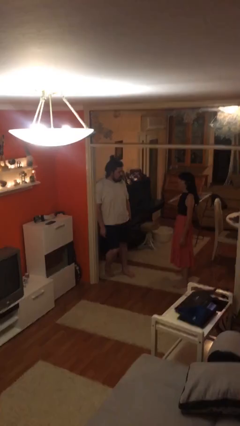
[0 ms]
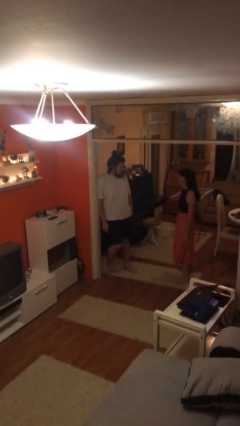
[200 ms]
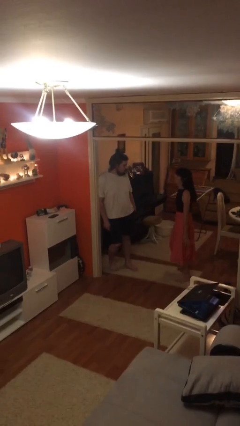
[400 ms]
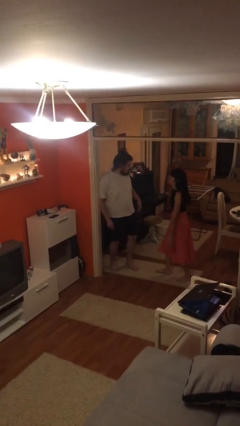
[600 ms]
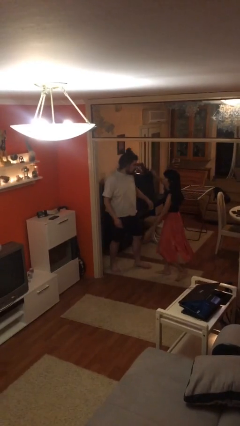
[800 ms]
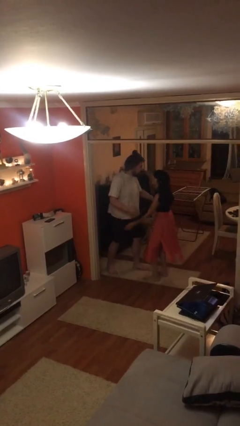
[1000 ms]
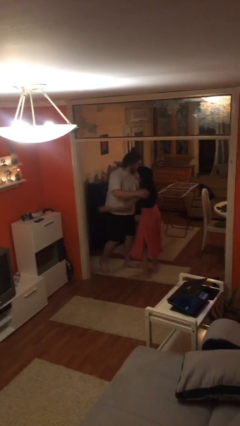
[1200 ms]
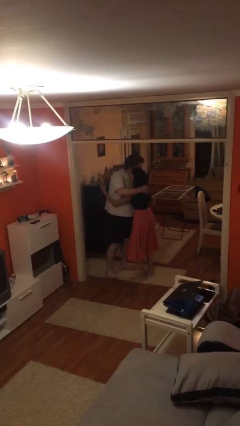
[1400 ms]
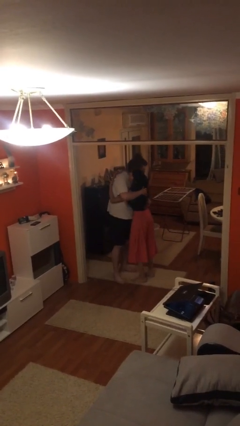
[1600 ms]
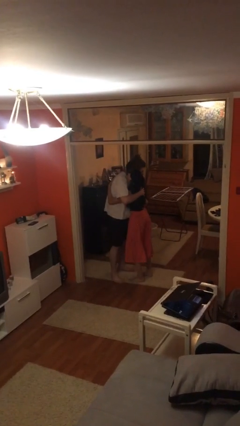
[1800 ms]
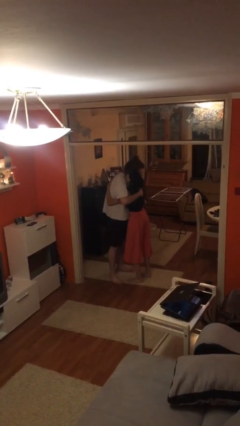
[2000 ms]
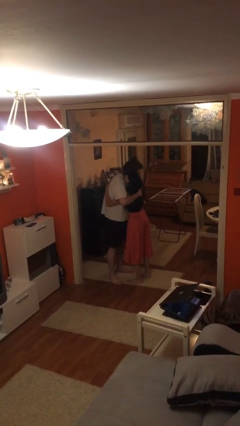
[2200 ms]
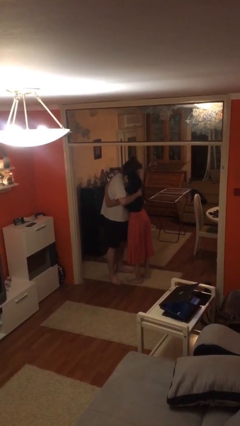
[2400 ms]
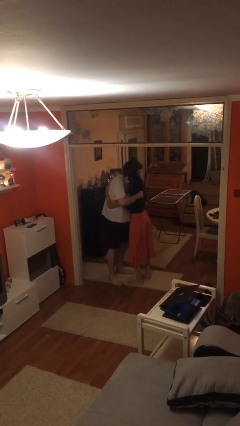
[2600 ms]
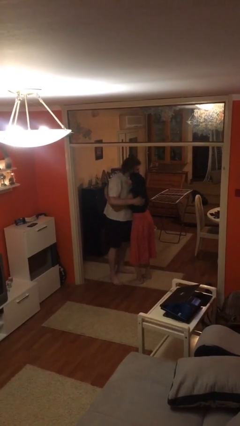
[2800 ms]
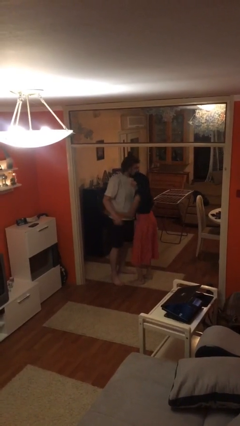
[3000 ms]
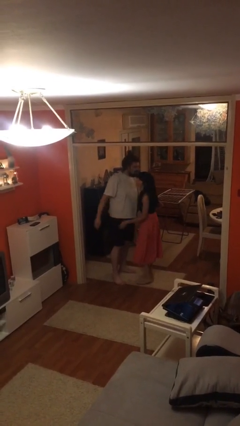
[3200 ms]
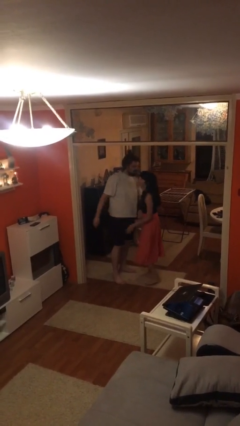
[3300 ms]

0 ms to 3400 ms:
person embraces person

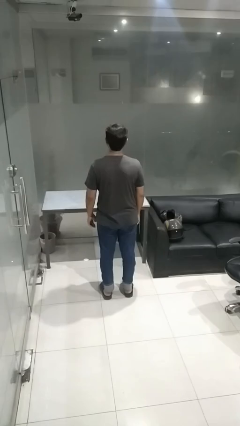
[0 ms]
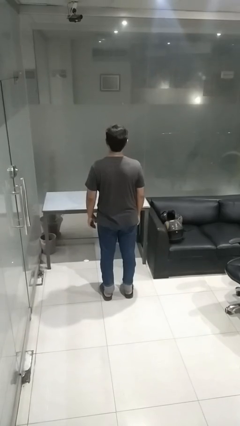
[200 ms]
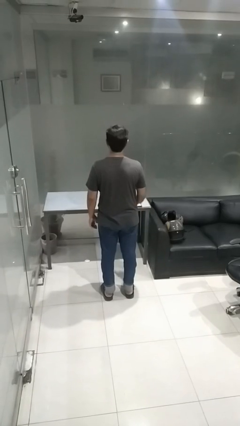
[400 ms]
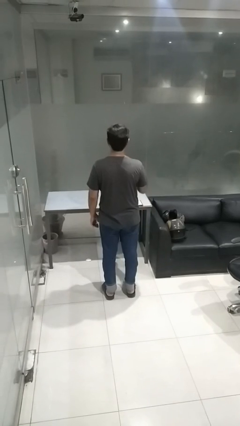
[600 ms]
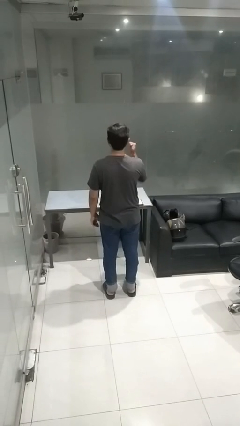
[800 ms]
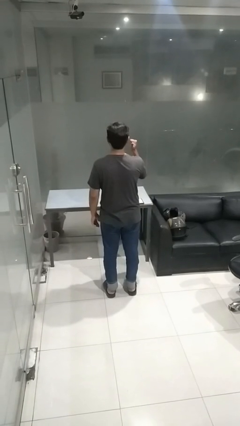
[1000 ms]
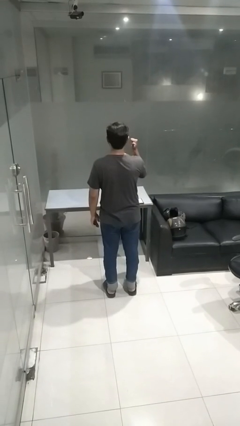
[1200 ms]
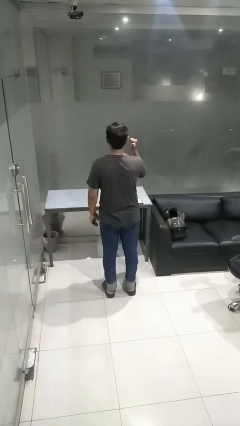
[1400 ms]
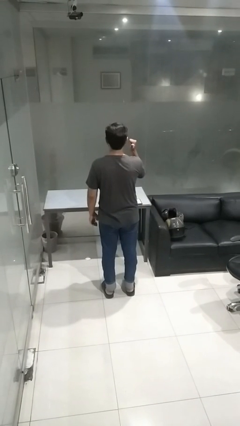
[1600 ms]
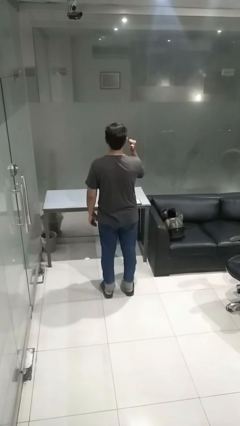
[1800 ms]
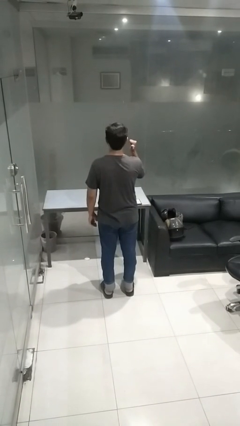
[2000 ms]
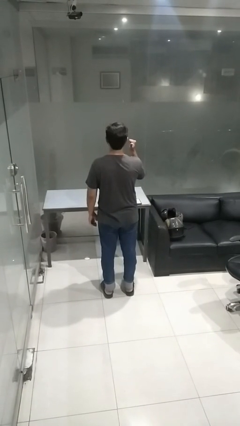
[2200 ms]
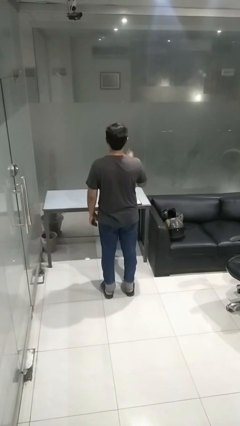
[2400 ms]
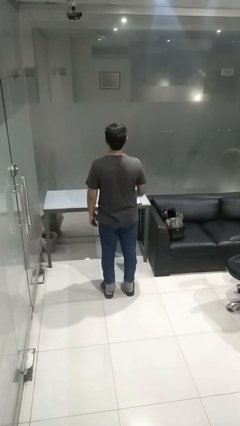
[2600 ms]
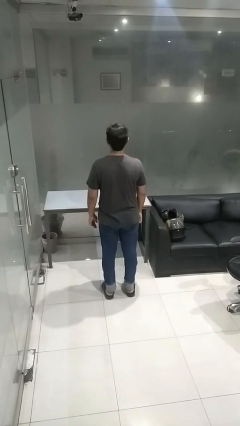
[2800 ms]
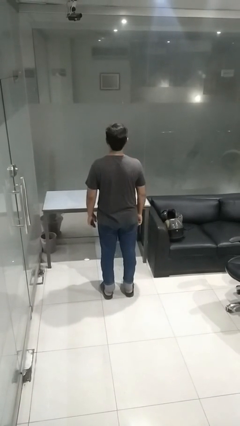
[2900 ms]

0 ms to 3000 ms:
person gestures behind me

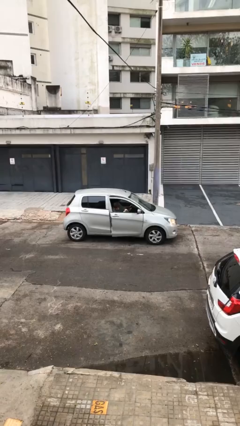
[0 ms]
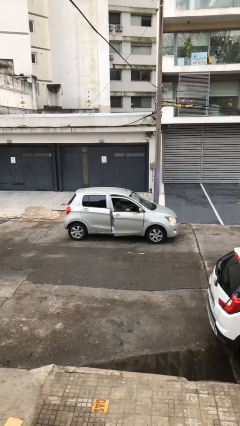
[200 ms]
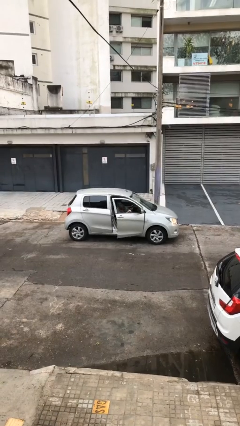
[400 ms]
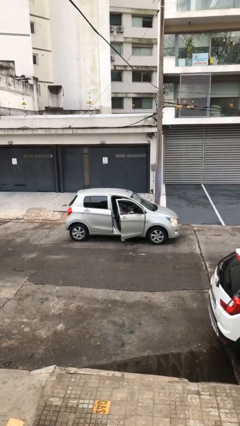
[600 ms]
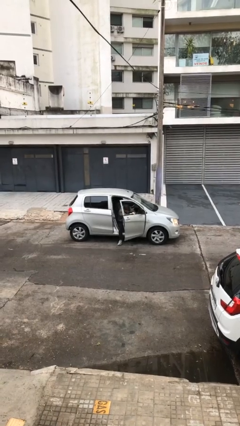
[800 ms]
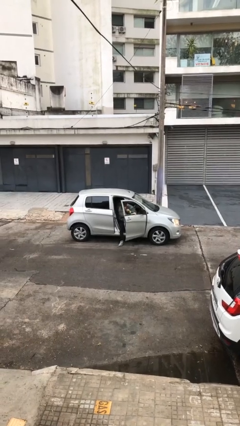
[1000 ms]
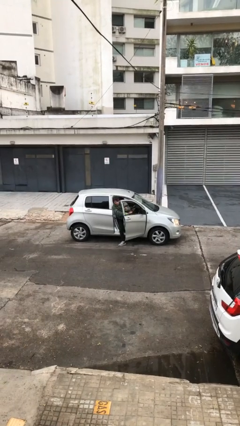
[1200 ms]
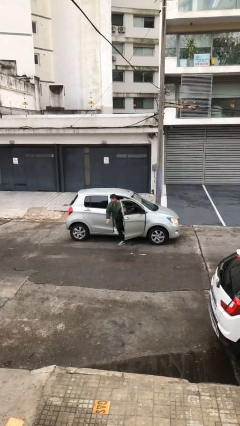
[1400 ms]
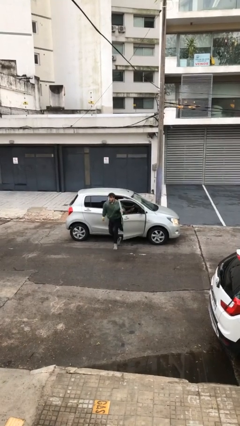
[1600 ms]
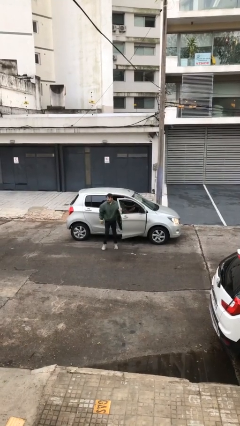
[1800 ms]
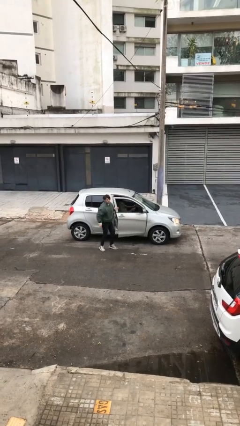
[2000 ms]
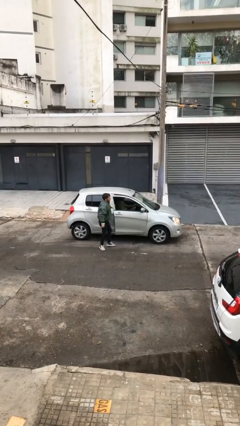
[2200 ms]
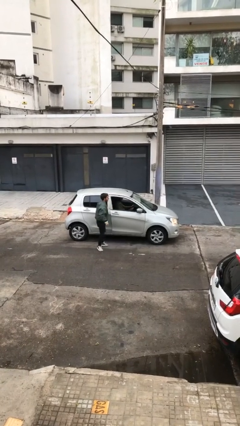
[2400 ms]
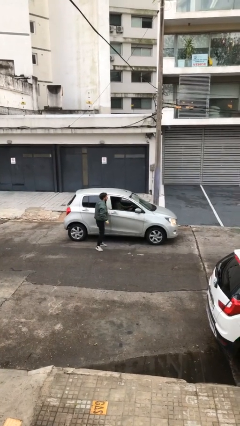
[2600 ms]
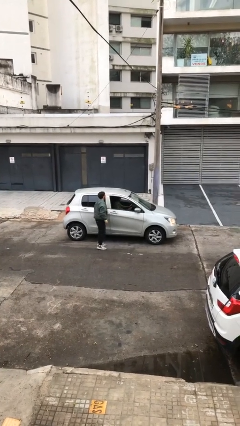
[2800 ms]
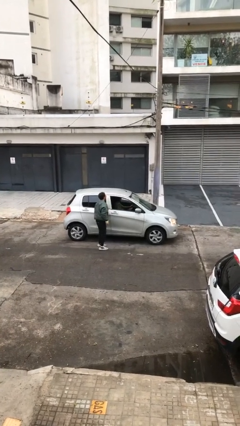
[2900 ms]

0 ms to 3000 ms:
car drops off person

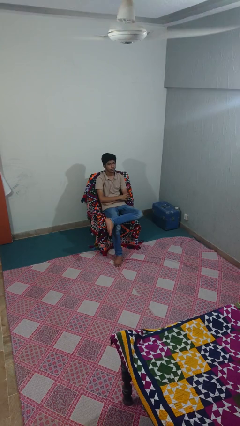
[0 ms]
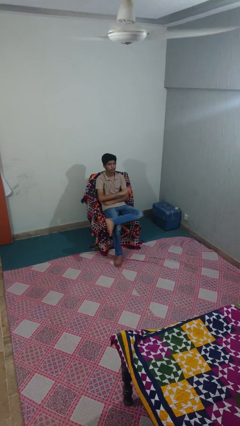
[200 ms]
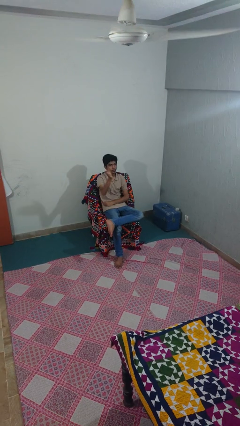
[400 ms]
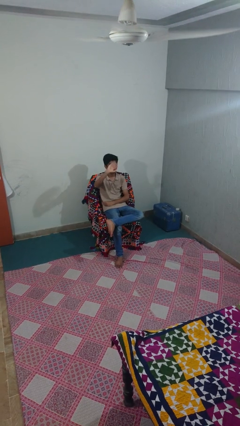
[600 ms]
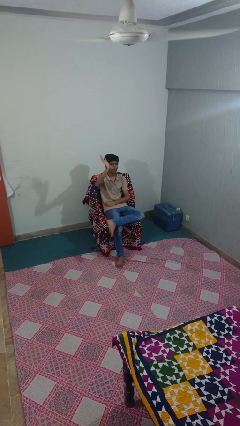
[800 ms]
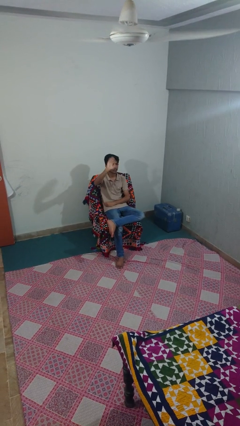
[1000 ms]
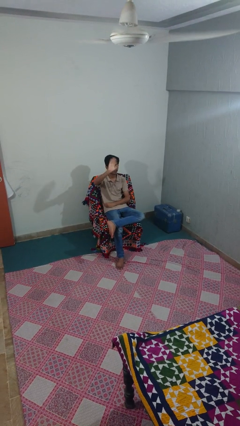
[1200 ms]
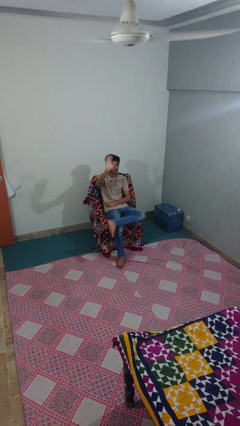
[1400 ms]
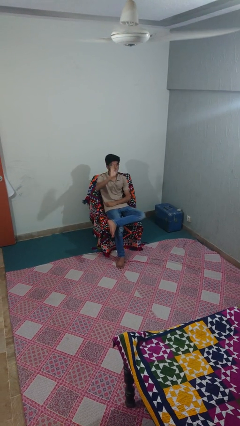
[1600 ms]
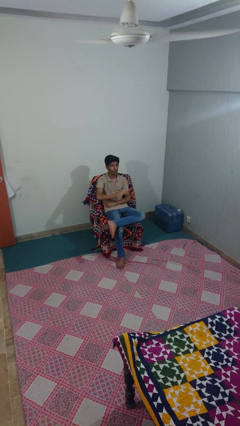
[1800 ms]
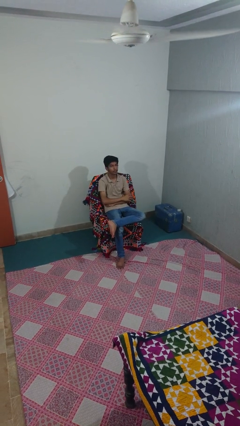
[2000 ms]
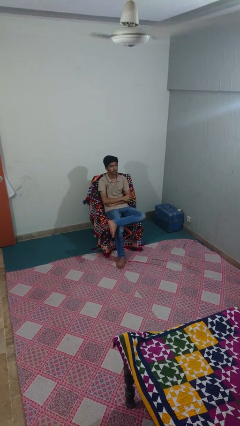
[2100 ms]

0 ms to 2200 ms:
person waves at person

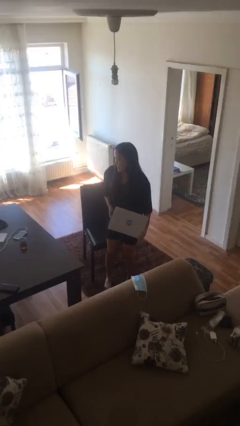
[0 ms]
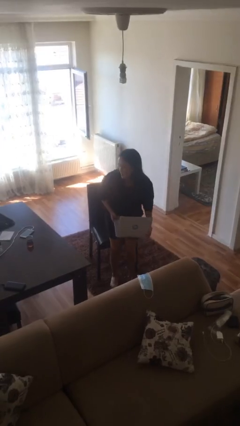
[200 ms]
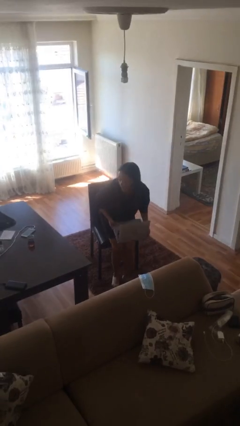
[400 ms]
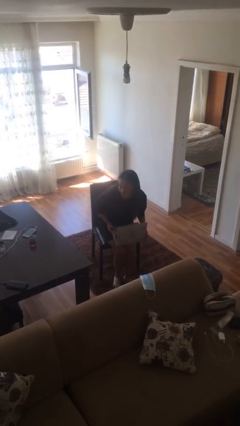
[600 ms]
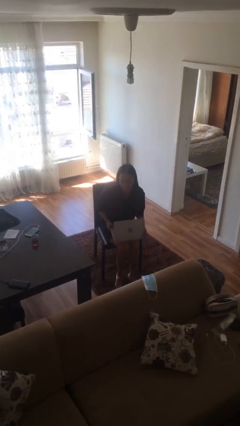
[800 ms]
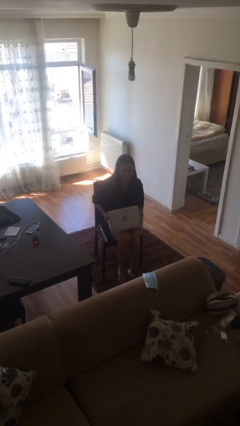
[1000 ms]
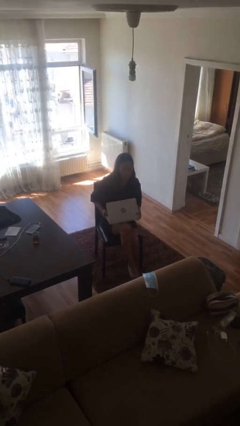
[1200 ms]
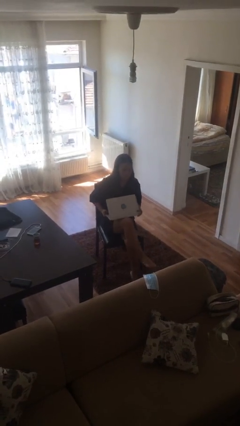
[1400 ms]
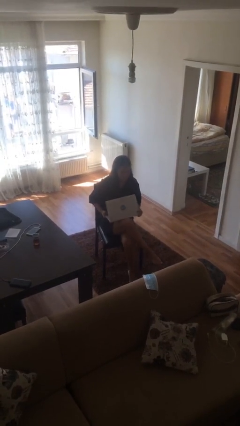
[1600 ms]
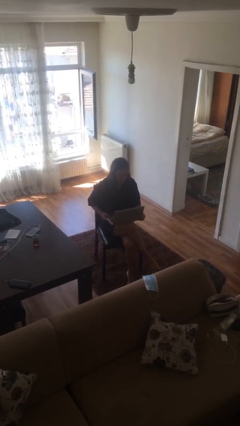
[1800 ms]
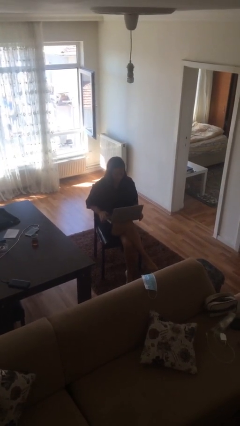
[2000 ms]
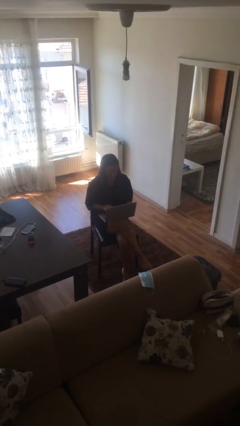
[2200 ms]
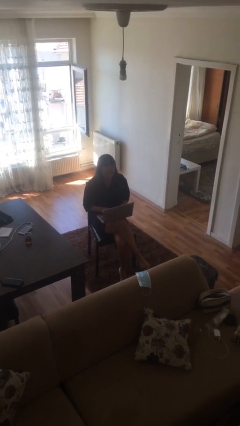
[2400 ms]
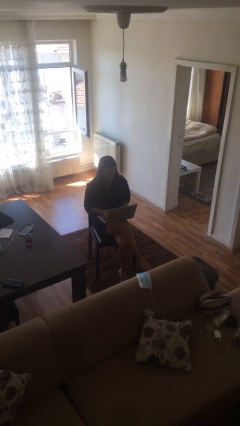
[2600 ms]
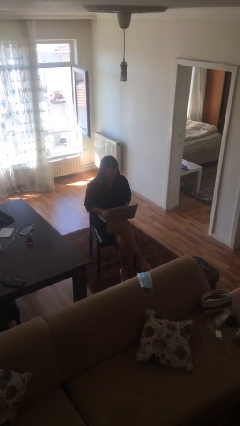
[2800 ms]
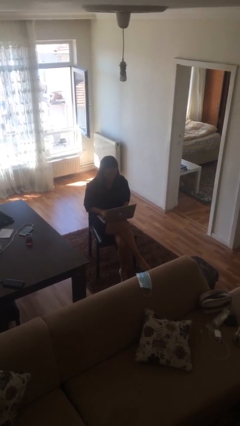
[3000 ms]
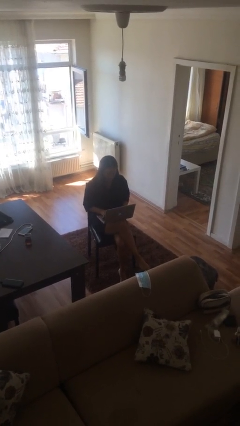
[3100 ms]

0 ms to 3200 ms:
person sits down

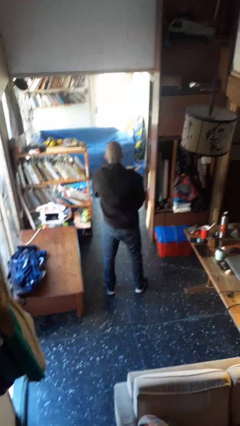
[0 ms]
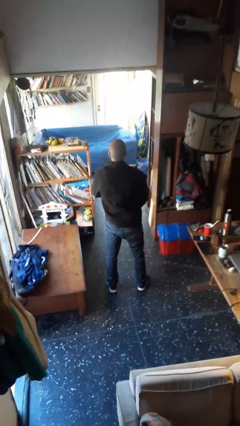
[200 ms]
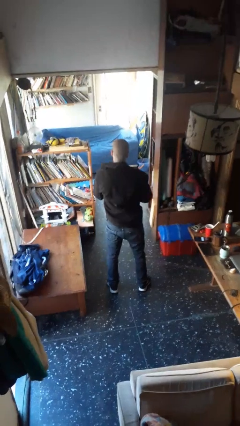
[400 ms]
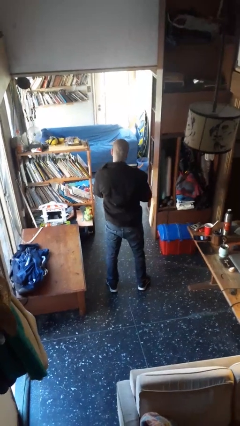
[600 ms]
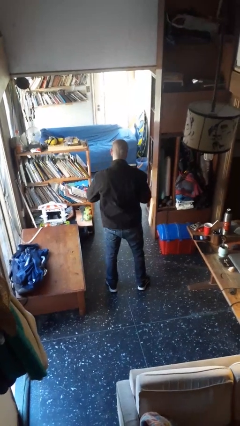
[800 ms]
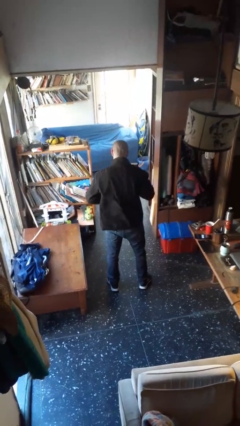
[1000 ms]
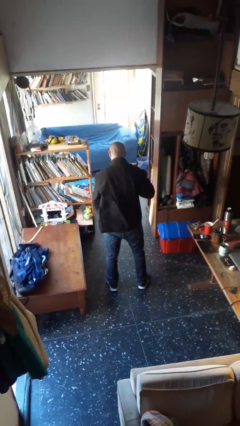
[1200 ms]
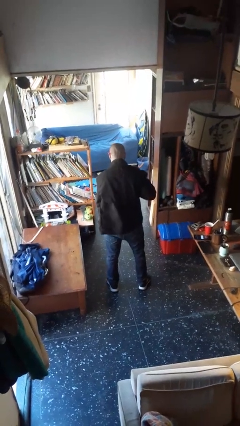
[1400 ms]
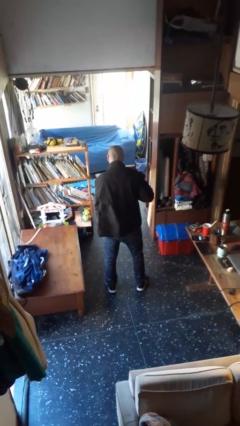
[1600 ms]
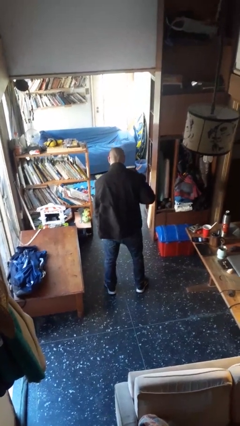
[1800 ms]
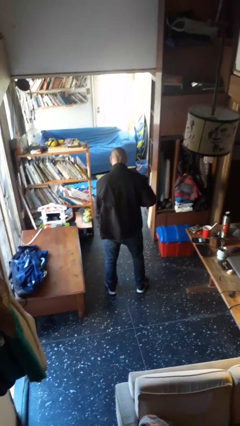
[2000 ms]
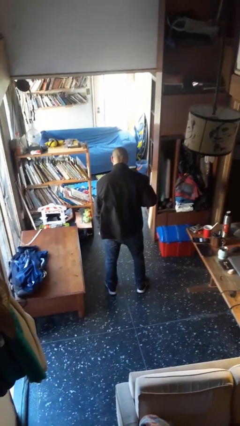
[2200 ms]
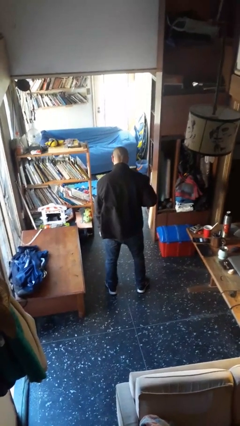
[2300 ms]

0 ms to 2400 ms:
person unzips jacket
